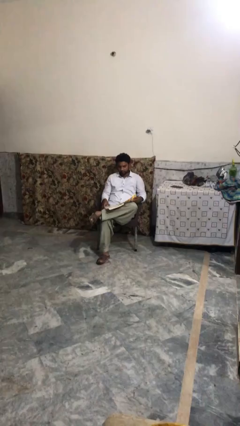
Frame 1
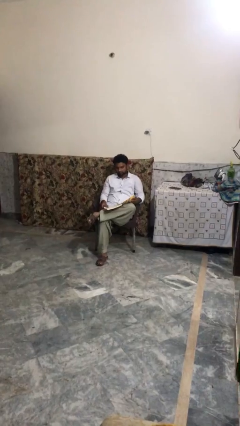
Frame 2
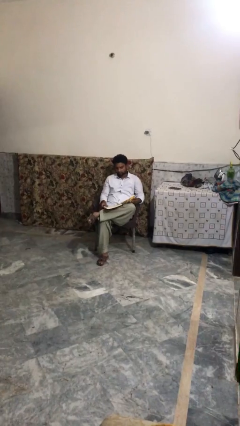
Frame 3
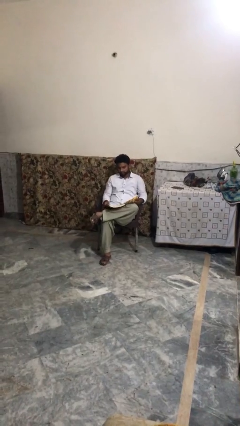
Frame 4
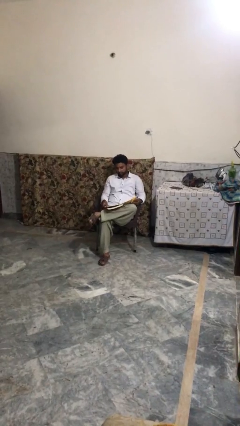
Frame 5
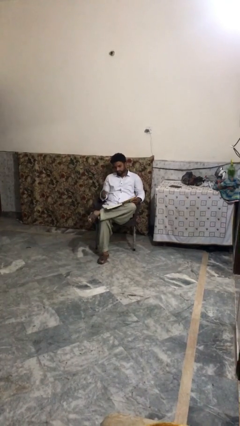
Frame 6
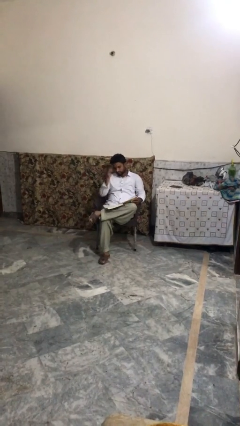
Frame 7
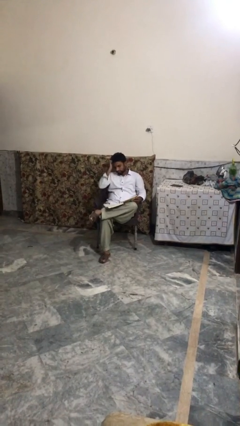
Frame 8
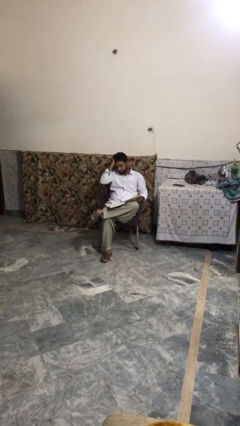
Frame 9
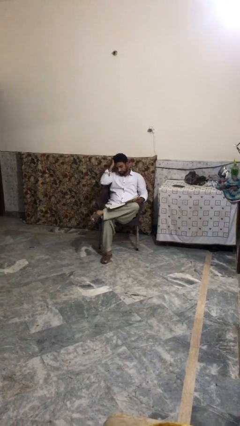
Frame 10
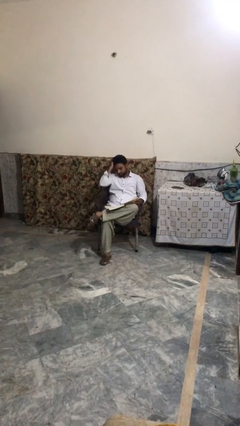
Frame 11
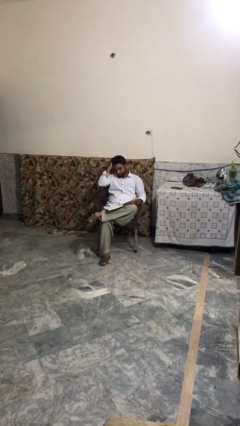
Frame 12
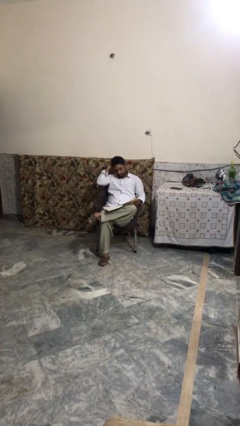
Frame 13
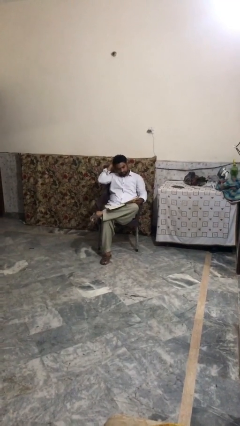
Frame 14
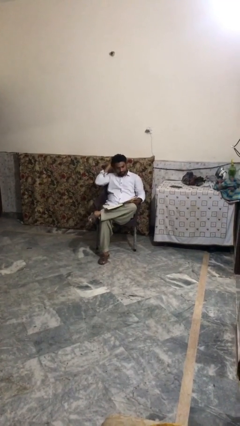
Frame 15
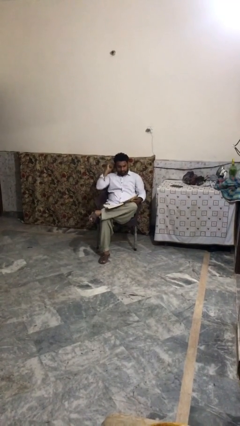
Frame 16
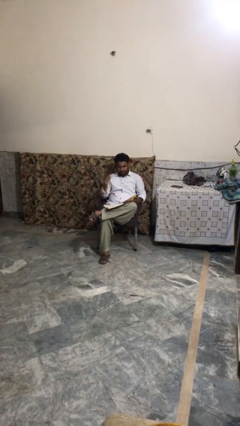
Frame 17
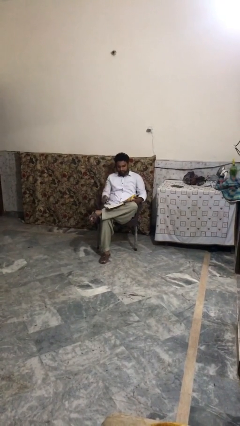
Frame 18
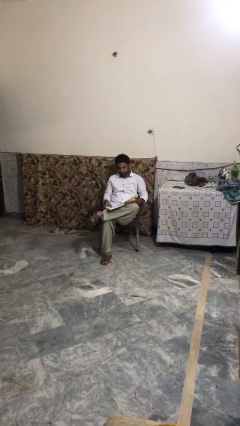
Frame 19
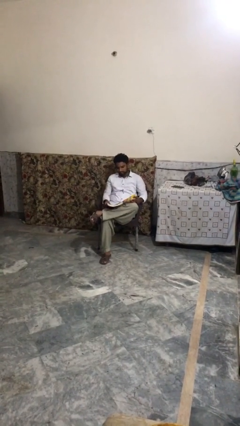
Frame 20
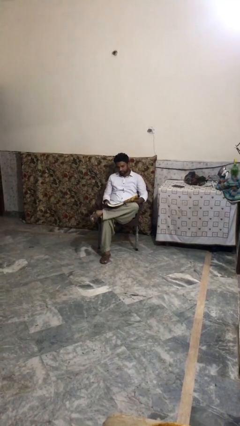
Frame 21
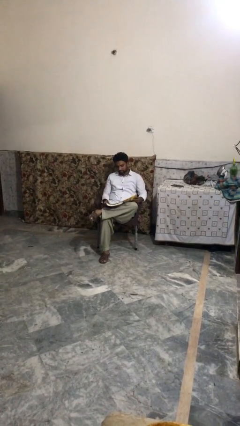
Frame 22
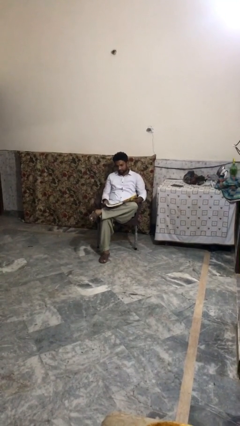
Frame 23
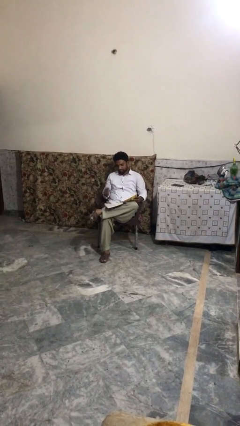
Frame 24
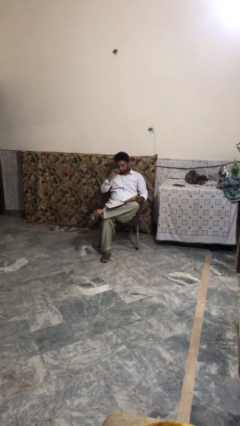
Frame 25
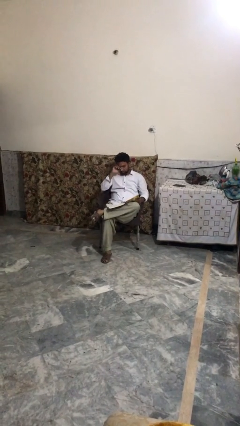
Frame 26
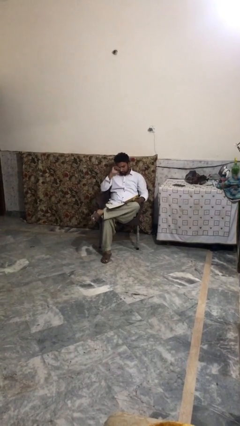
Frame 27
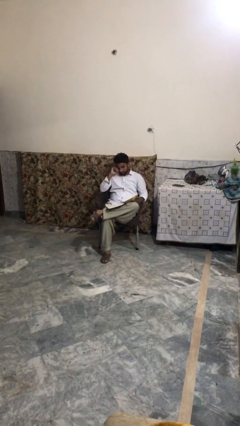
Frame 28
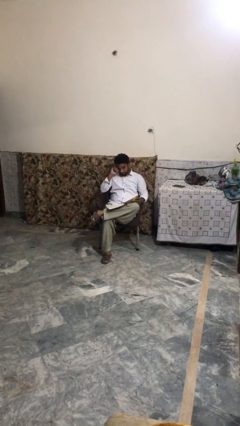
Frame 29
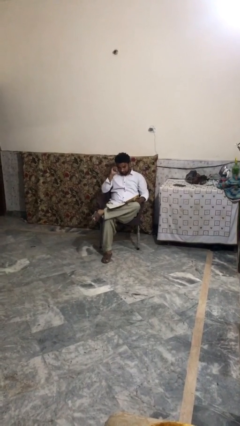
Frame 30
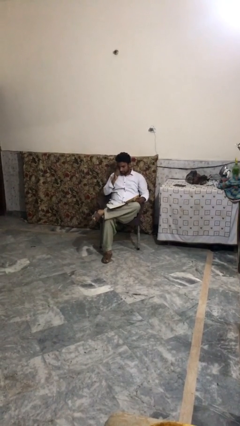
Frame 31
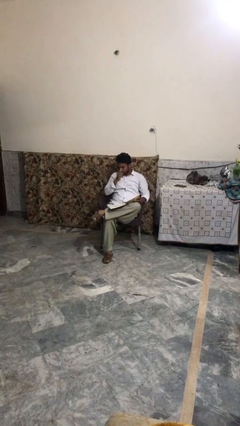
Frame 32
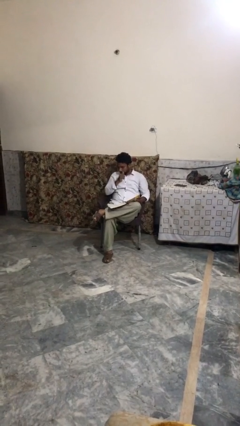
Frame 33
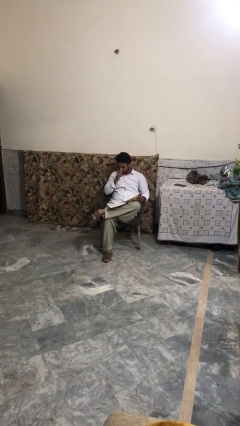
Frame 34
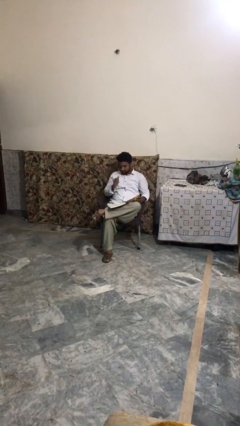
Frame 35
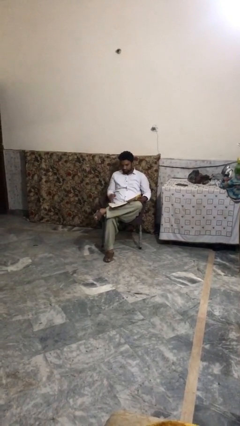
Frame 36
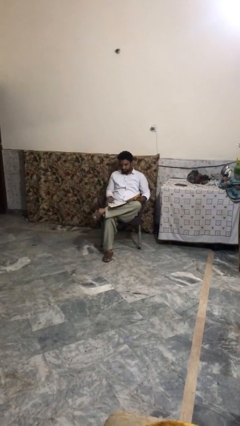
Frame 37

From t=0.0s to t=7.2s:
person reads document

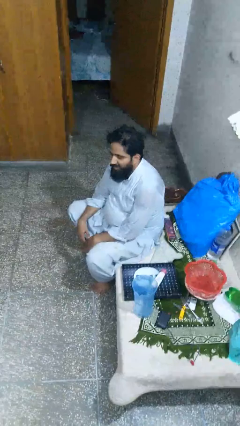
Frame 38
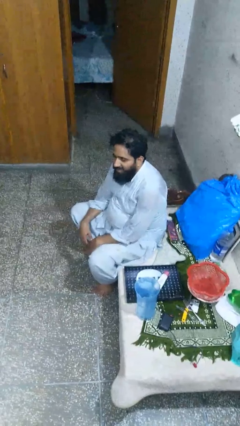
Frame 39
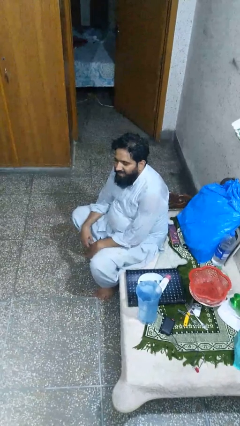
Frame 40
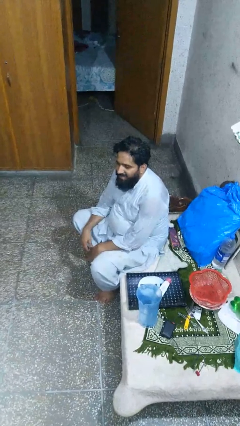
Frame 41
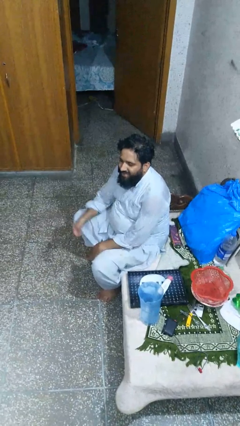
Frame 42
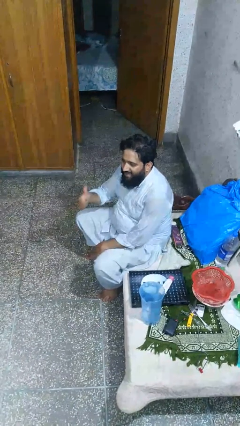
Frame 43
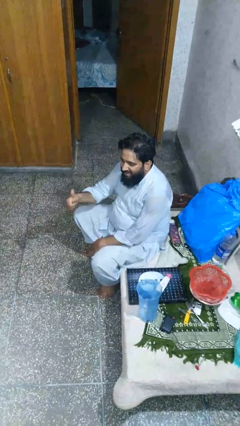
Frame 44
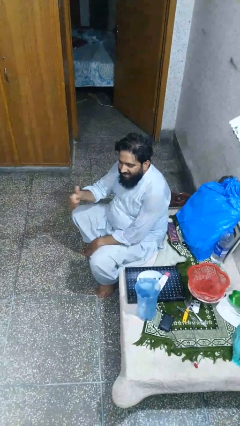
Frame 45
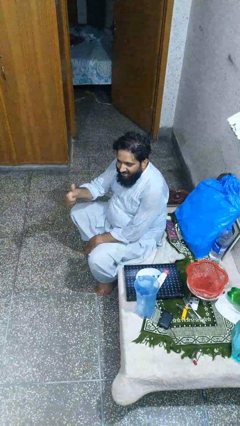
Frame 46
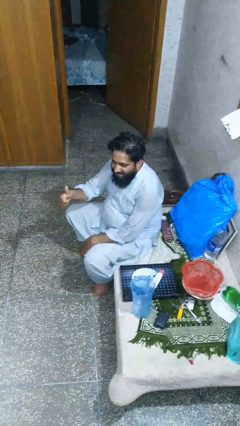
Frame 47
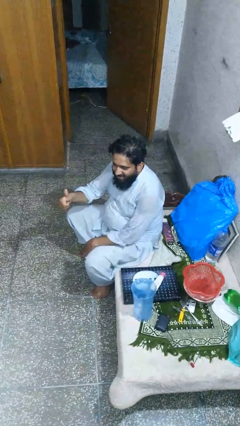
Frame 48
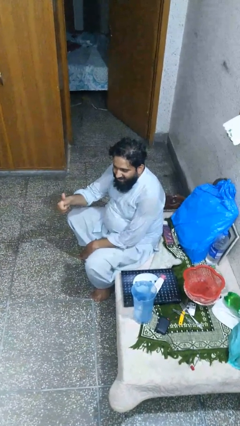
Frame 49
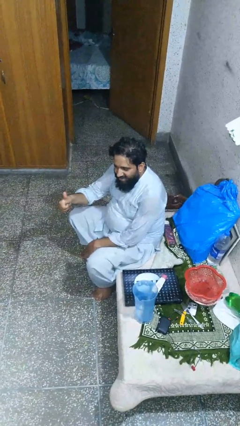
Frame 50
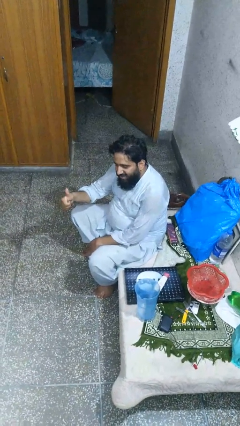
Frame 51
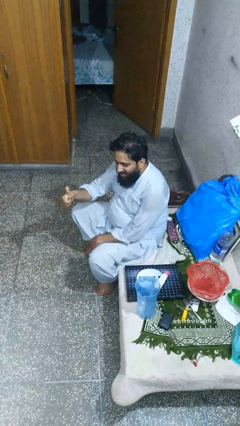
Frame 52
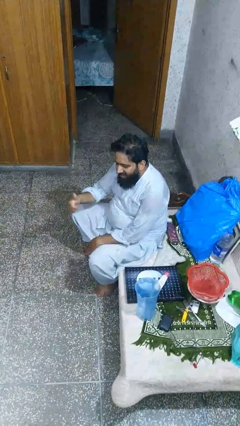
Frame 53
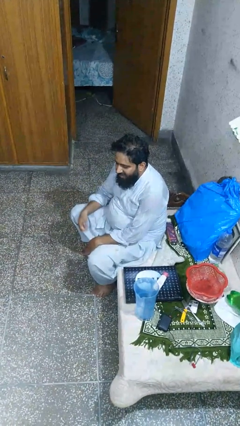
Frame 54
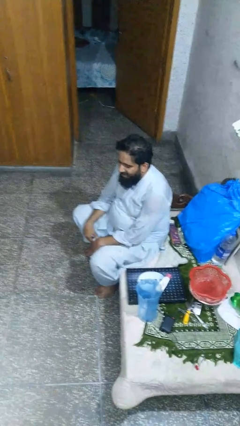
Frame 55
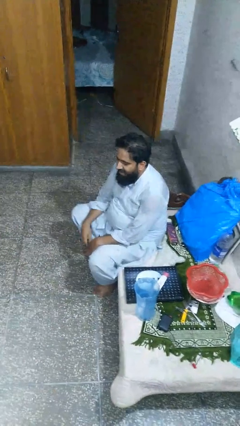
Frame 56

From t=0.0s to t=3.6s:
person gestures thumbs up

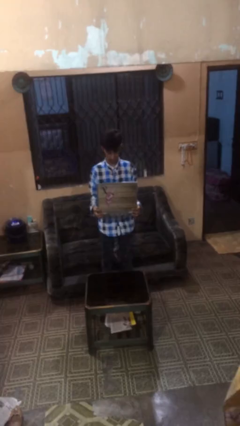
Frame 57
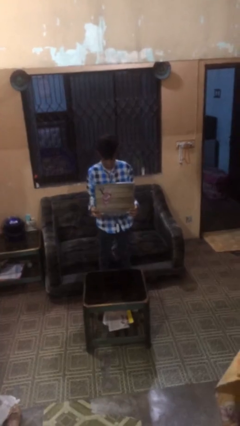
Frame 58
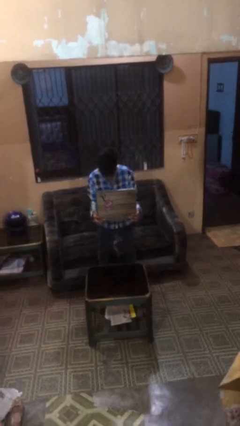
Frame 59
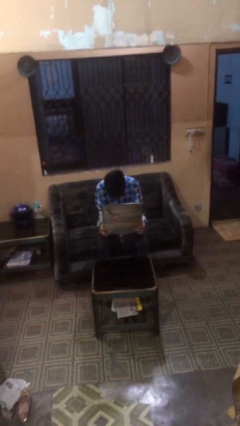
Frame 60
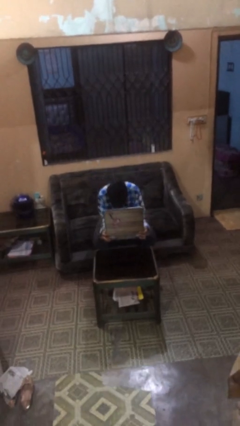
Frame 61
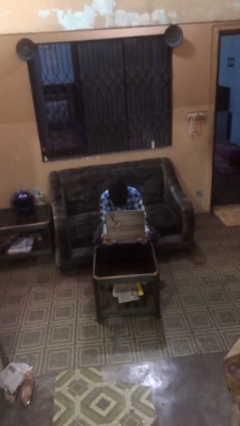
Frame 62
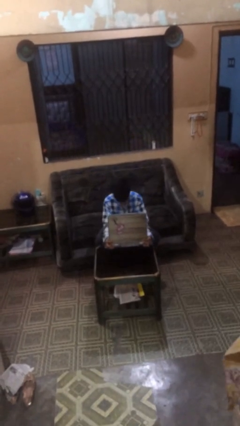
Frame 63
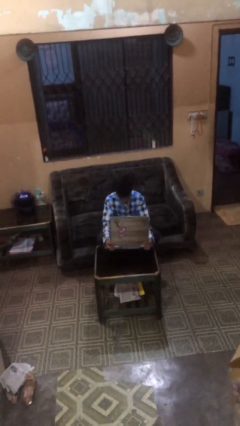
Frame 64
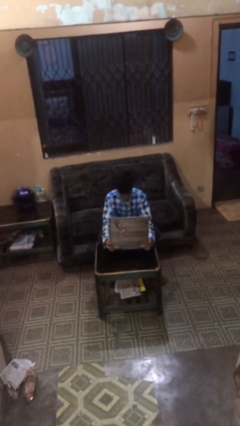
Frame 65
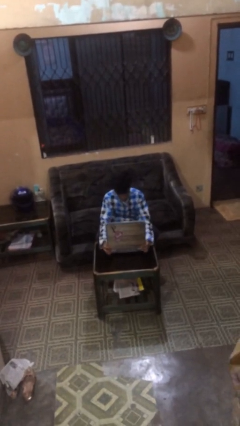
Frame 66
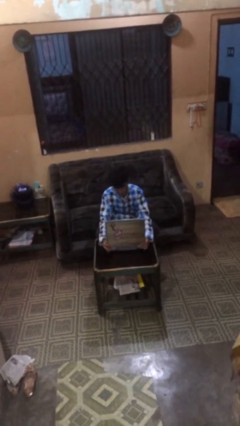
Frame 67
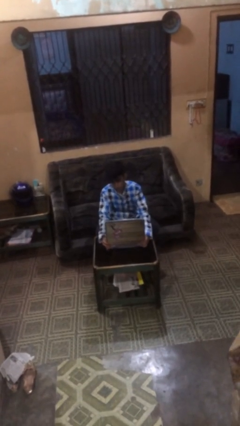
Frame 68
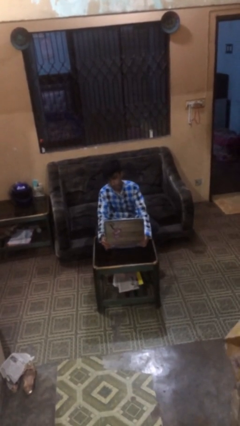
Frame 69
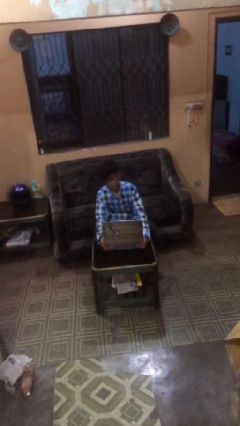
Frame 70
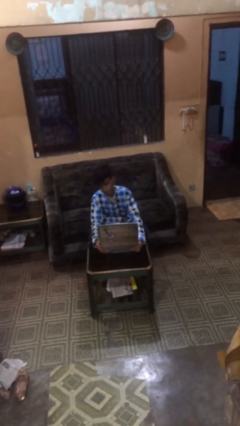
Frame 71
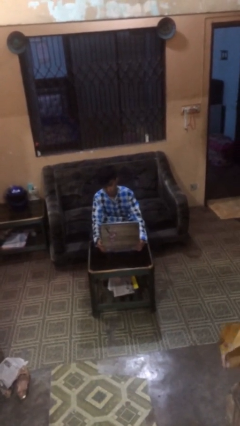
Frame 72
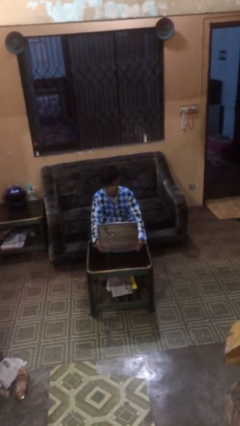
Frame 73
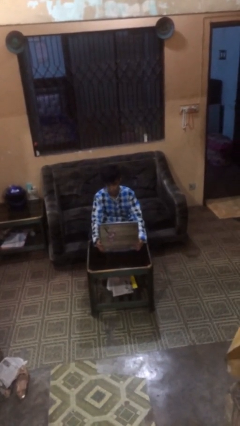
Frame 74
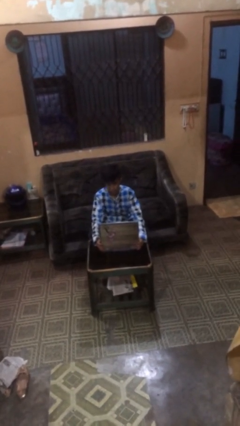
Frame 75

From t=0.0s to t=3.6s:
person sits down

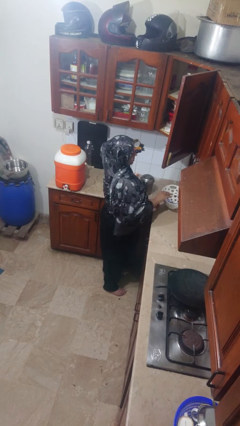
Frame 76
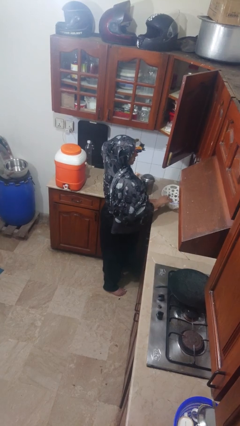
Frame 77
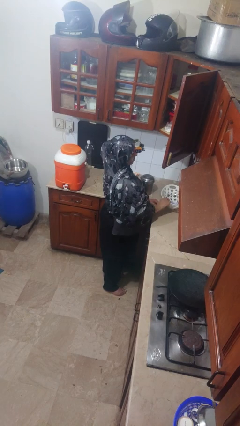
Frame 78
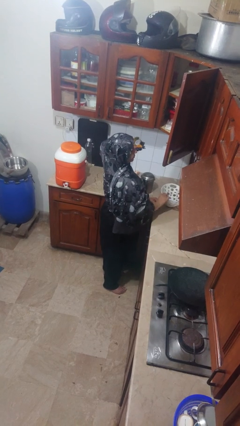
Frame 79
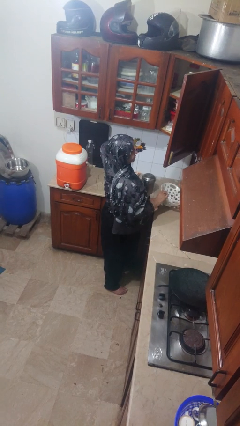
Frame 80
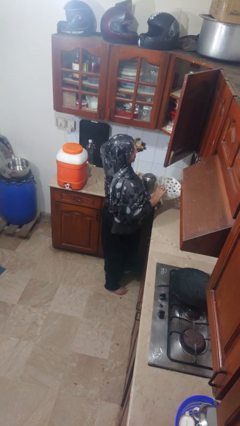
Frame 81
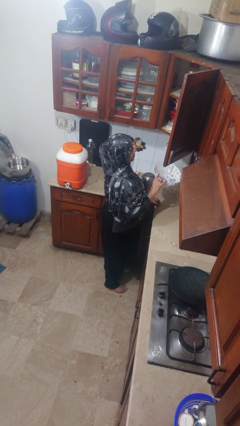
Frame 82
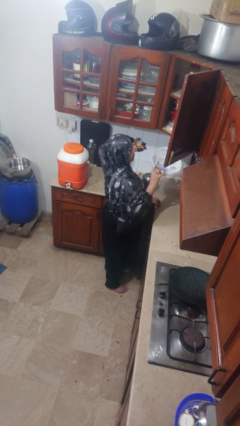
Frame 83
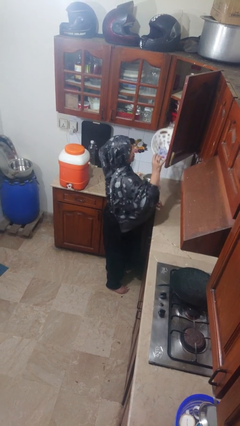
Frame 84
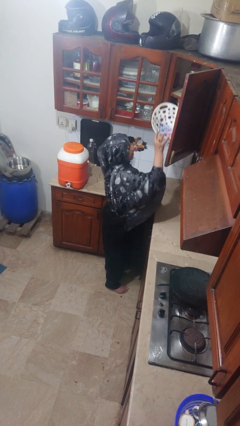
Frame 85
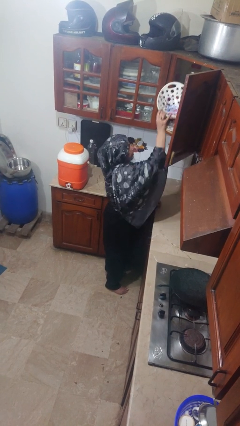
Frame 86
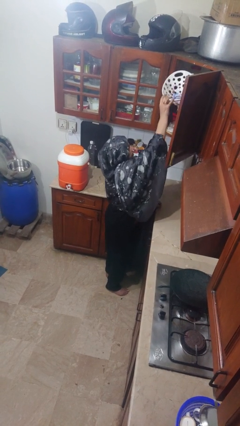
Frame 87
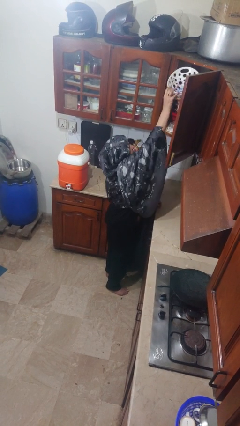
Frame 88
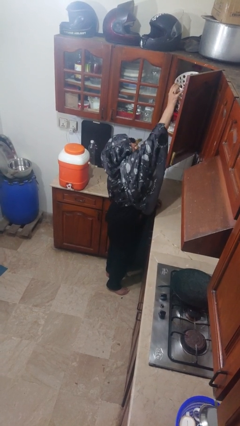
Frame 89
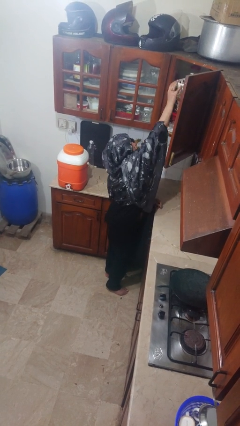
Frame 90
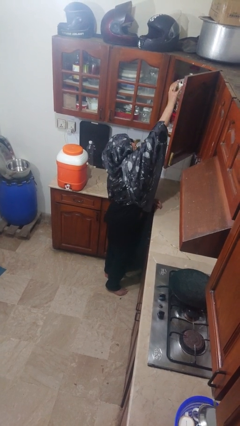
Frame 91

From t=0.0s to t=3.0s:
person loads groceries into cabinet

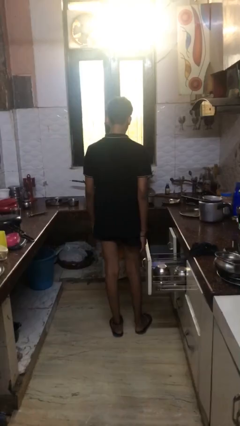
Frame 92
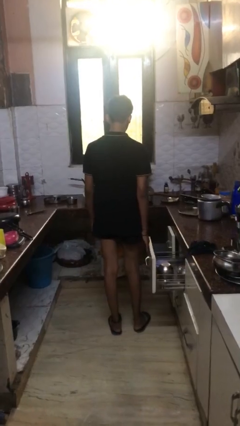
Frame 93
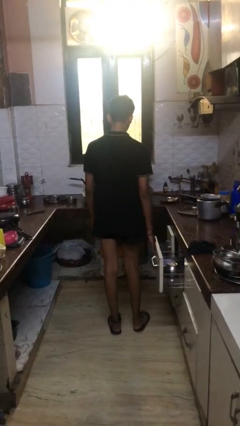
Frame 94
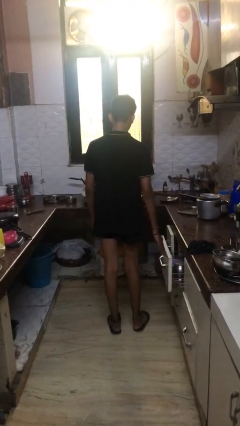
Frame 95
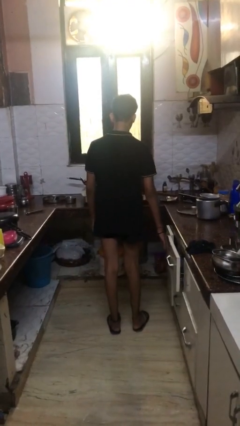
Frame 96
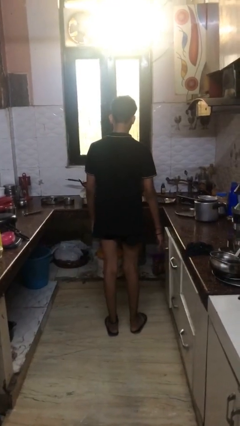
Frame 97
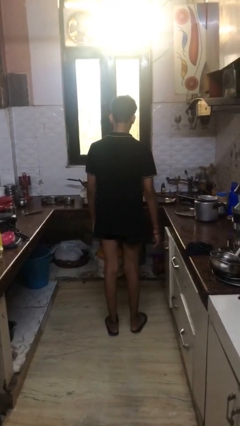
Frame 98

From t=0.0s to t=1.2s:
person closes kitchen drawer
